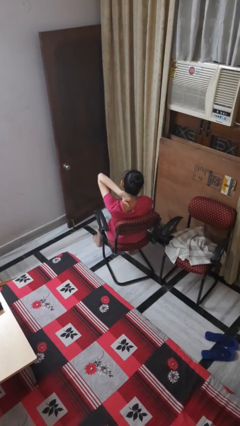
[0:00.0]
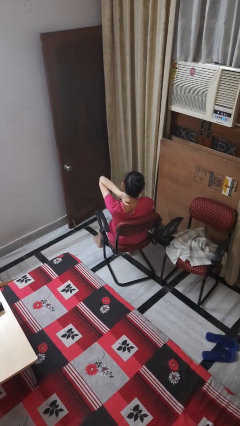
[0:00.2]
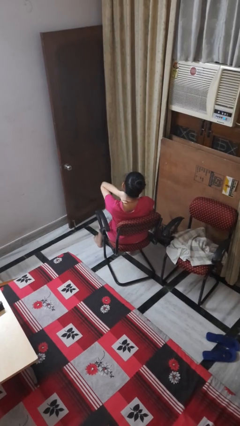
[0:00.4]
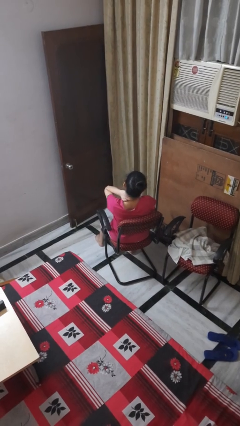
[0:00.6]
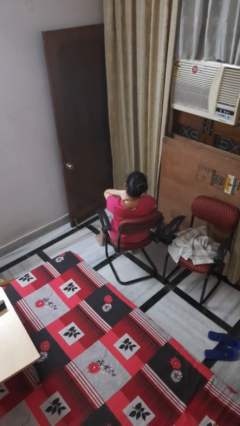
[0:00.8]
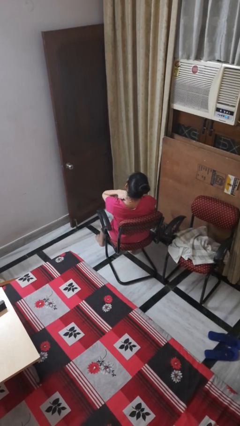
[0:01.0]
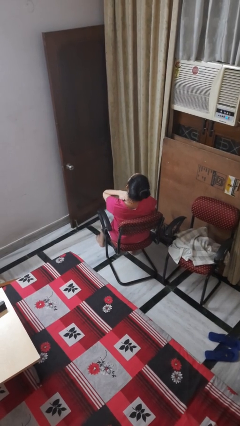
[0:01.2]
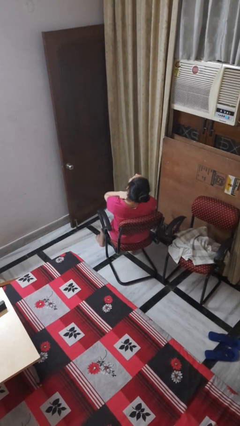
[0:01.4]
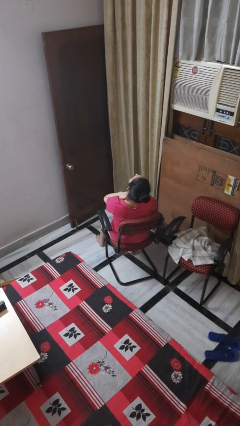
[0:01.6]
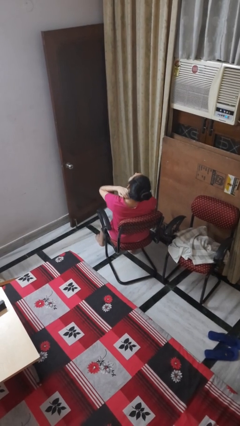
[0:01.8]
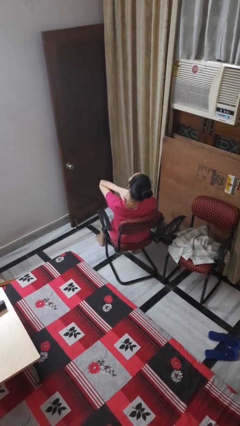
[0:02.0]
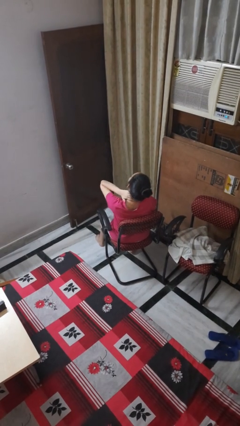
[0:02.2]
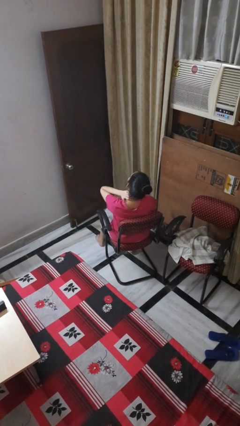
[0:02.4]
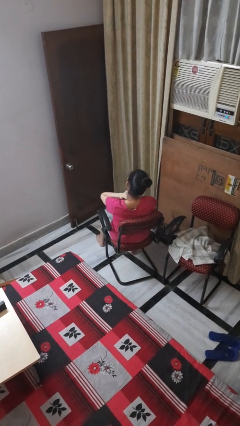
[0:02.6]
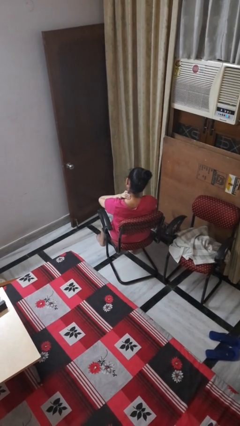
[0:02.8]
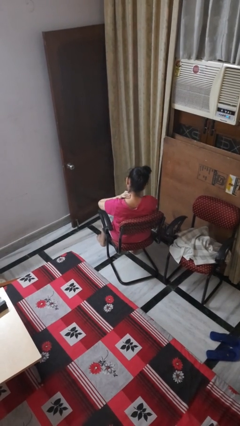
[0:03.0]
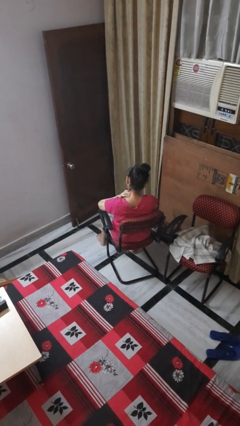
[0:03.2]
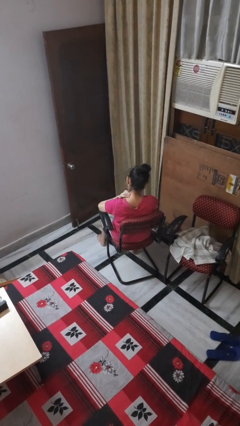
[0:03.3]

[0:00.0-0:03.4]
person rubs neck

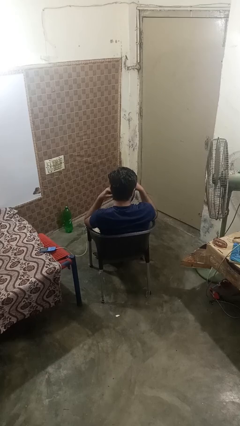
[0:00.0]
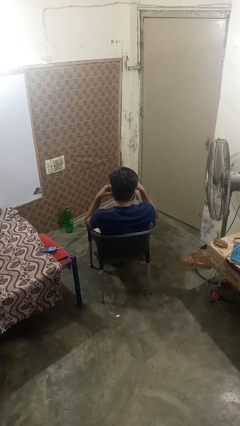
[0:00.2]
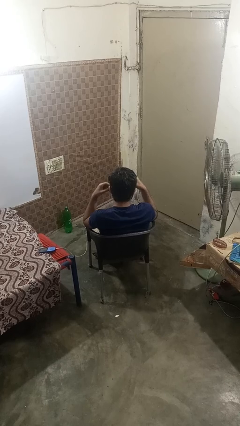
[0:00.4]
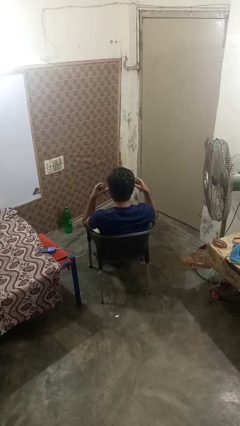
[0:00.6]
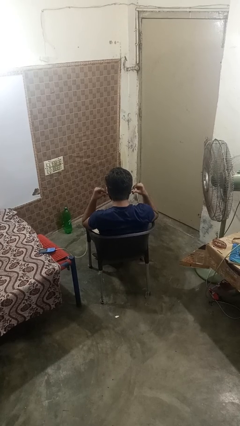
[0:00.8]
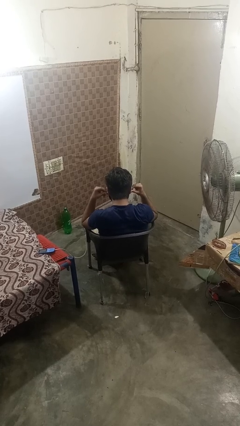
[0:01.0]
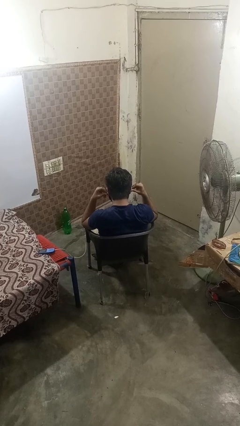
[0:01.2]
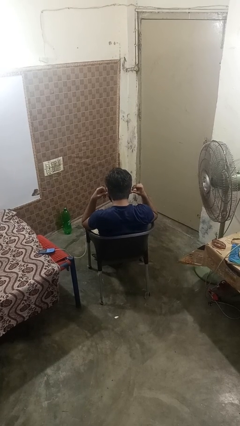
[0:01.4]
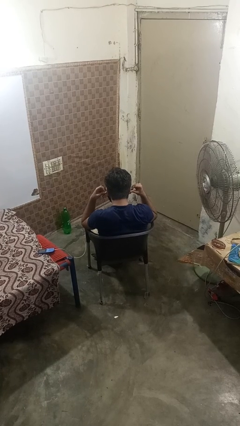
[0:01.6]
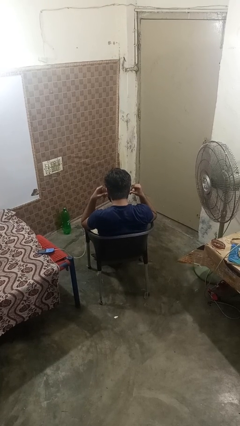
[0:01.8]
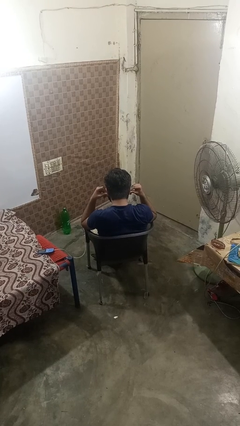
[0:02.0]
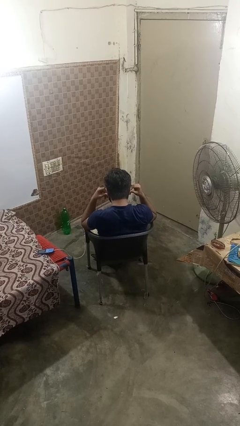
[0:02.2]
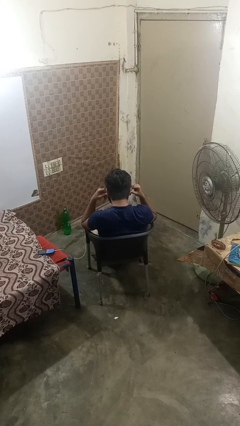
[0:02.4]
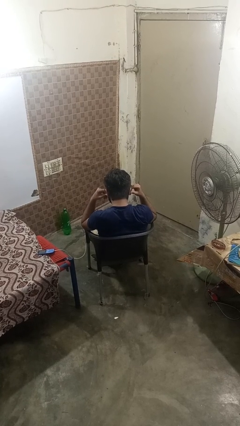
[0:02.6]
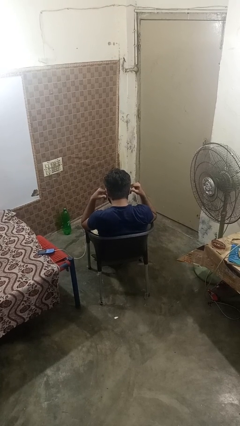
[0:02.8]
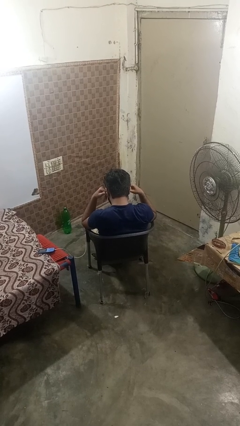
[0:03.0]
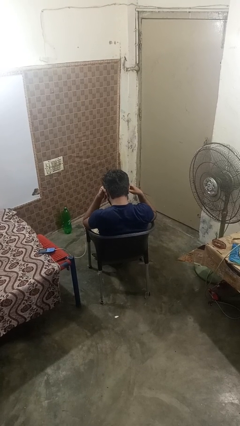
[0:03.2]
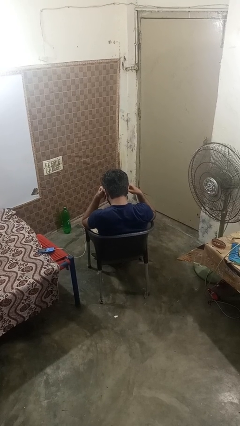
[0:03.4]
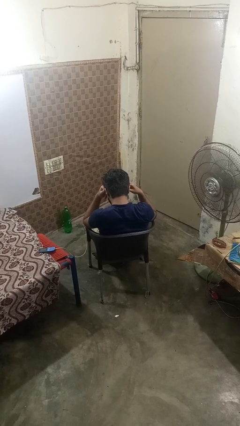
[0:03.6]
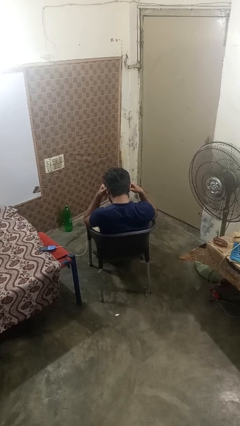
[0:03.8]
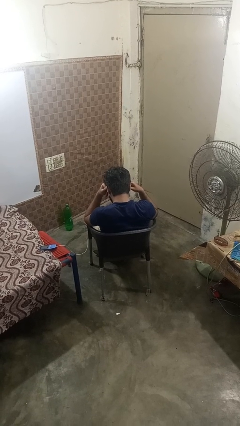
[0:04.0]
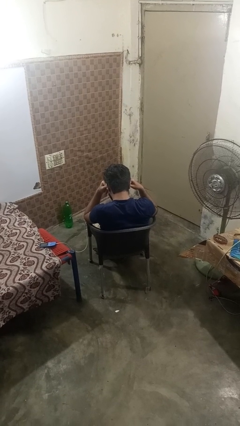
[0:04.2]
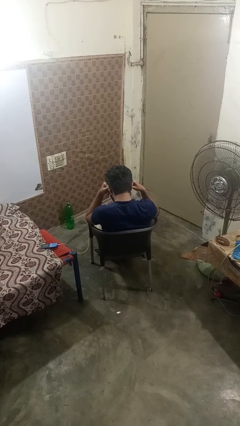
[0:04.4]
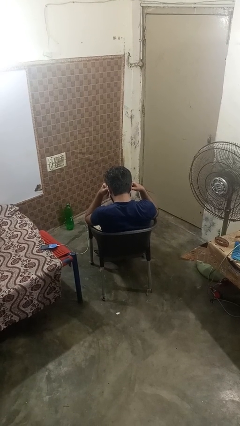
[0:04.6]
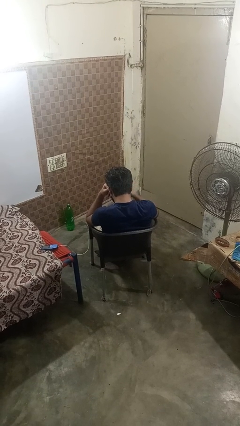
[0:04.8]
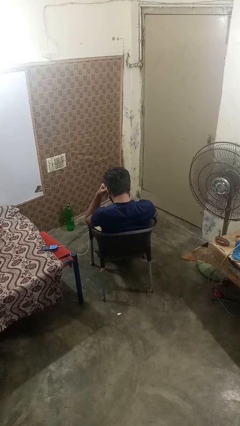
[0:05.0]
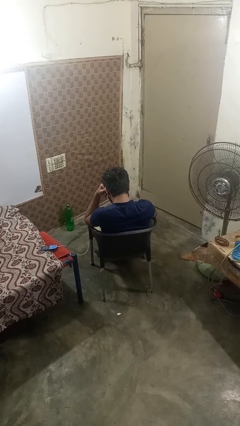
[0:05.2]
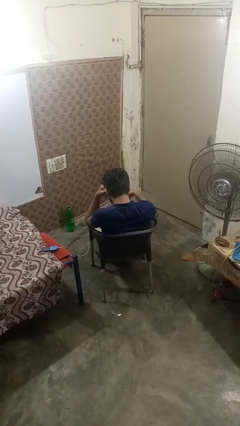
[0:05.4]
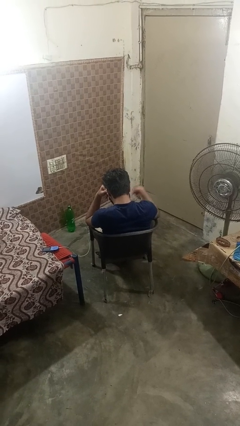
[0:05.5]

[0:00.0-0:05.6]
person puts on headphones

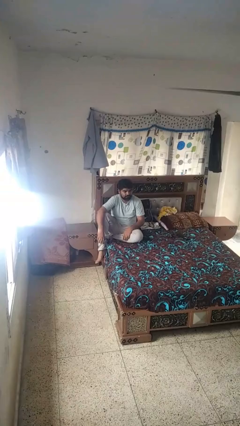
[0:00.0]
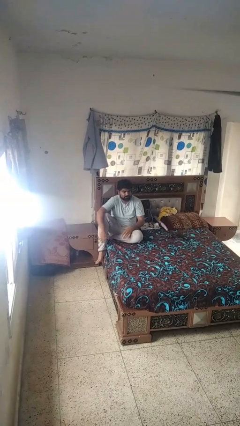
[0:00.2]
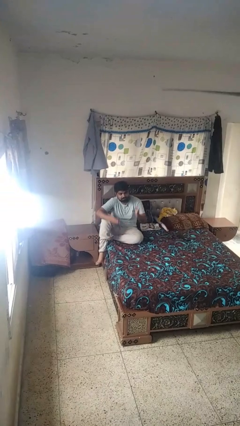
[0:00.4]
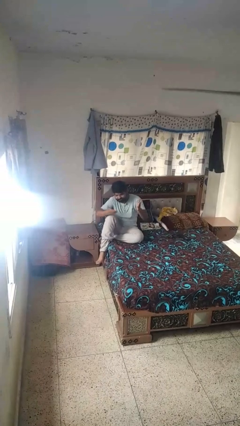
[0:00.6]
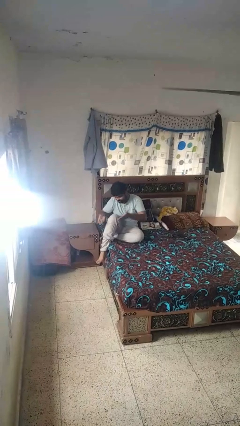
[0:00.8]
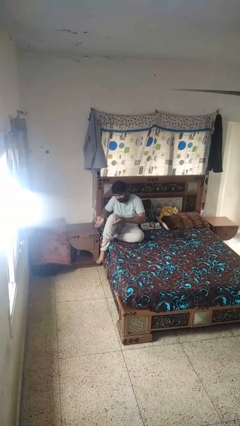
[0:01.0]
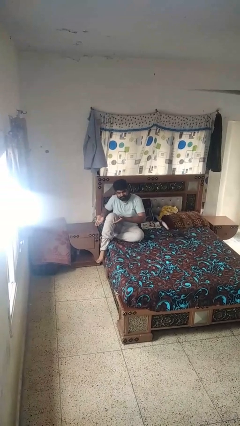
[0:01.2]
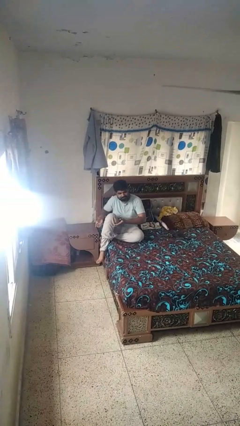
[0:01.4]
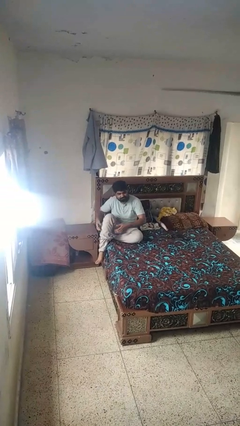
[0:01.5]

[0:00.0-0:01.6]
person gestures come here

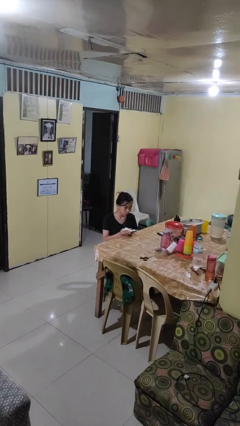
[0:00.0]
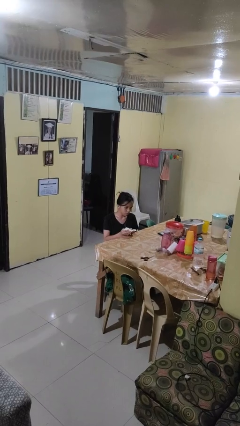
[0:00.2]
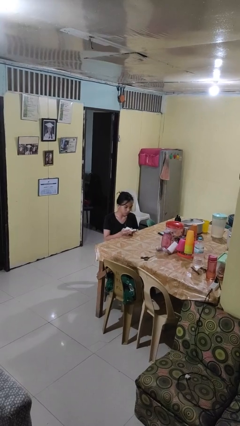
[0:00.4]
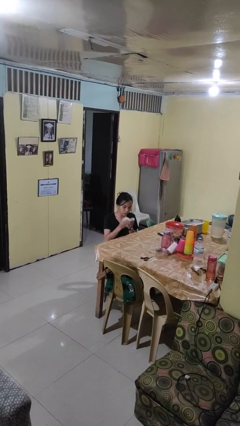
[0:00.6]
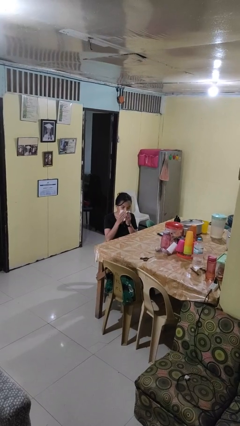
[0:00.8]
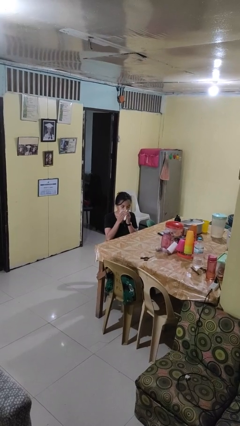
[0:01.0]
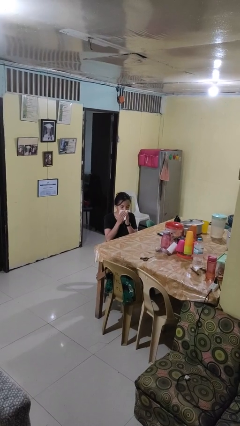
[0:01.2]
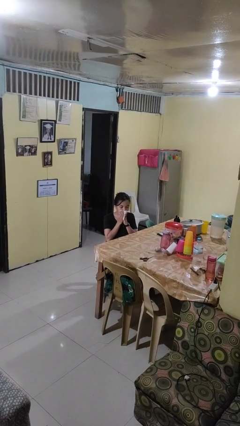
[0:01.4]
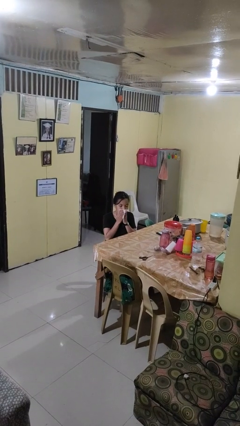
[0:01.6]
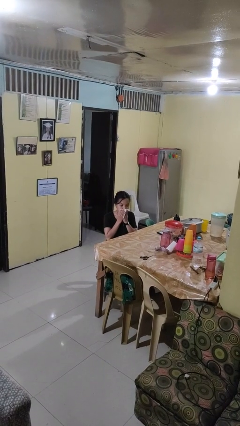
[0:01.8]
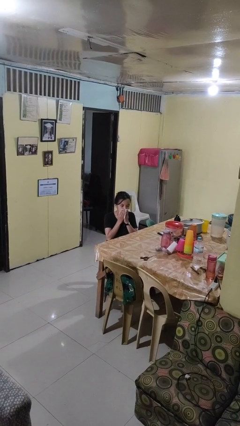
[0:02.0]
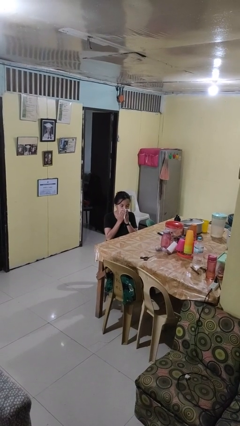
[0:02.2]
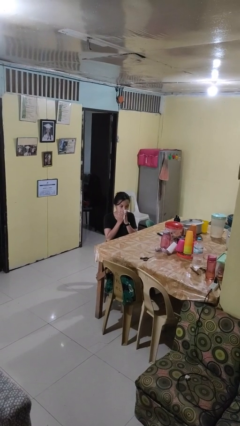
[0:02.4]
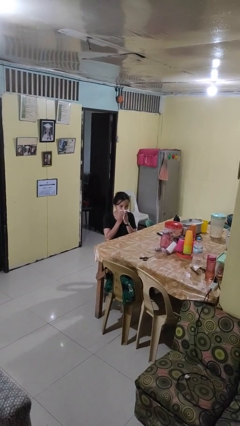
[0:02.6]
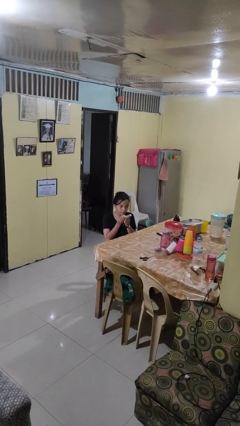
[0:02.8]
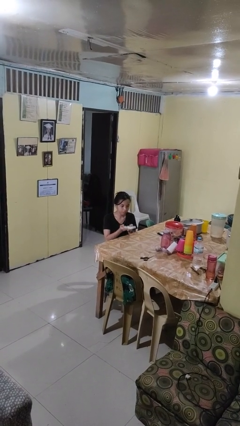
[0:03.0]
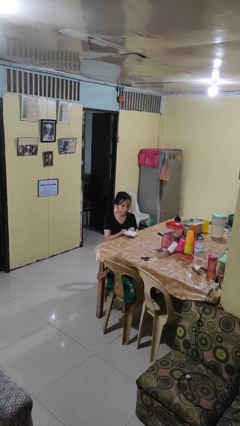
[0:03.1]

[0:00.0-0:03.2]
person wipes mouth with napkin

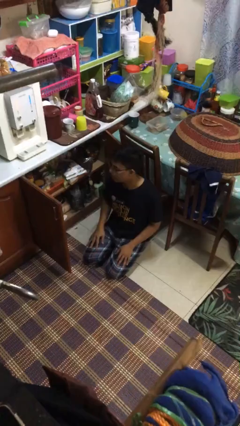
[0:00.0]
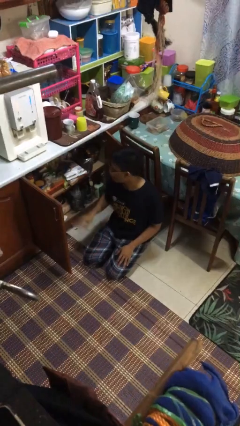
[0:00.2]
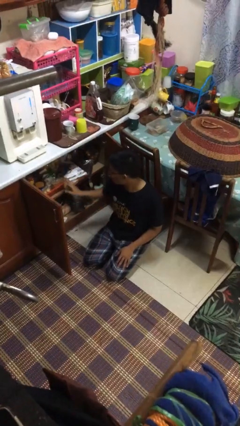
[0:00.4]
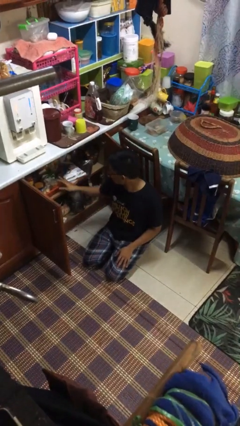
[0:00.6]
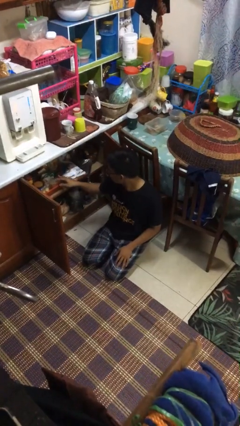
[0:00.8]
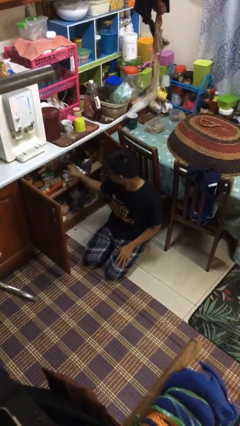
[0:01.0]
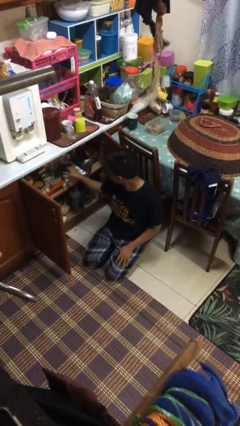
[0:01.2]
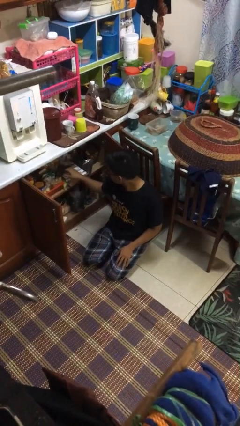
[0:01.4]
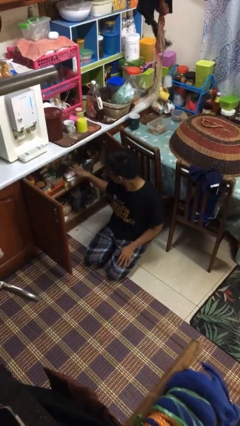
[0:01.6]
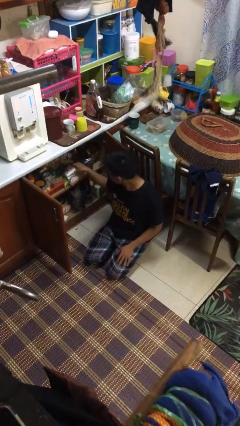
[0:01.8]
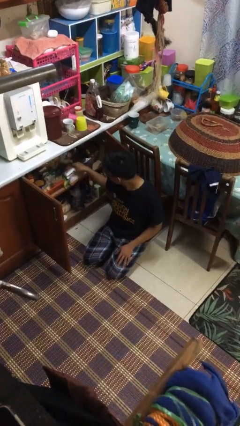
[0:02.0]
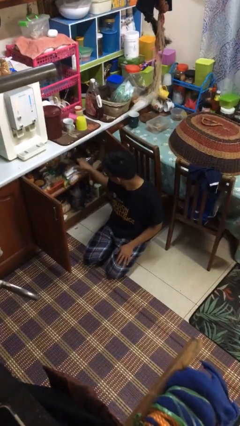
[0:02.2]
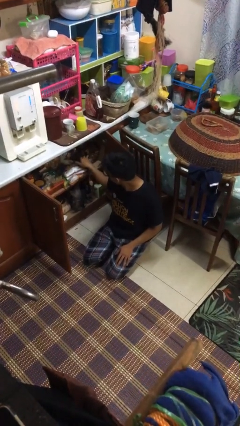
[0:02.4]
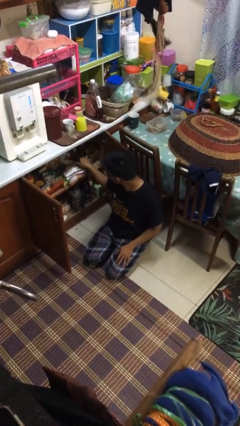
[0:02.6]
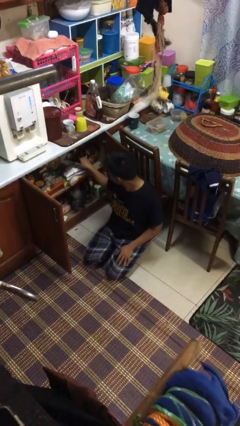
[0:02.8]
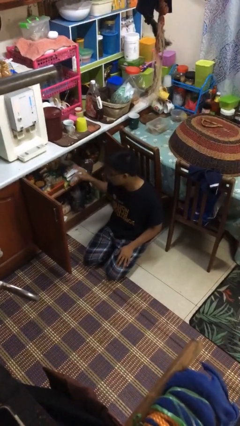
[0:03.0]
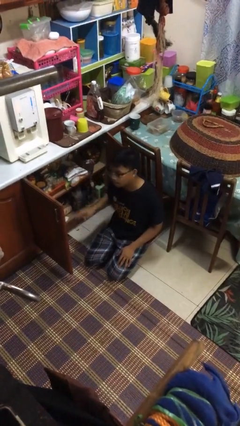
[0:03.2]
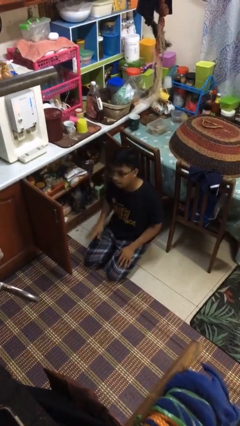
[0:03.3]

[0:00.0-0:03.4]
person searches in kitchen drawer

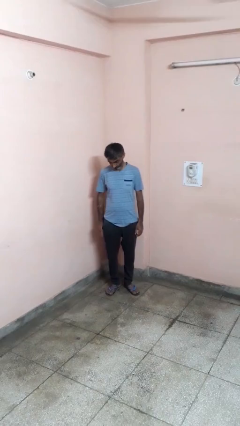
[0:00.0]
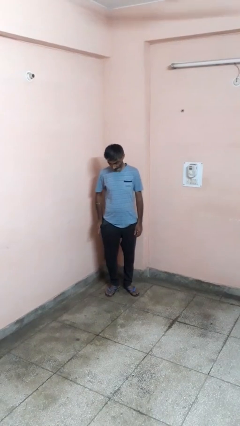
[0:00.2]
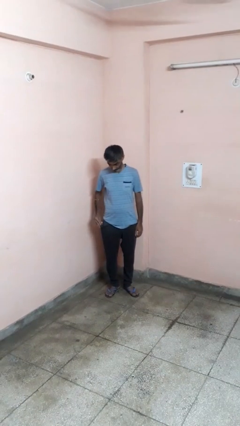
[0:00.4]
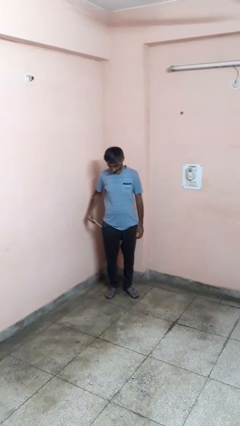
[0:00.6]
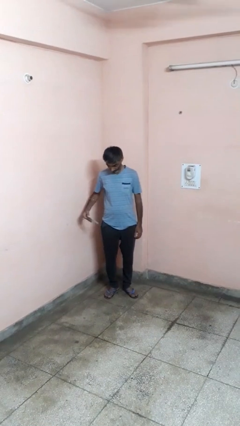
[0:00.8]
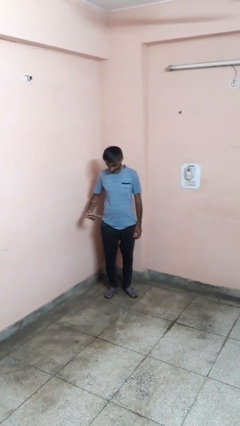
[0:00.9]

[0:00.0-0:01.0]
person takes phone from pocket
